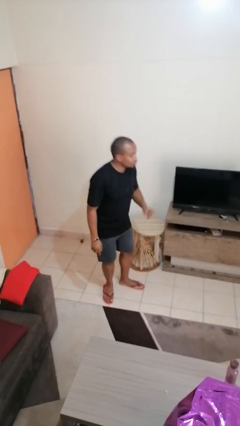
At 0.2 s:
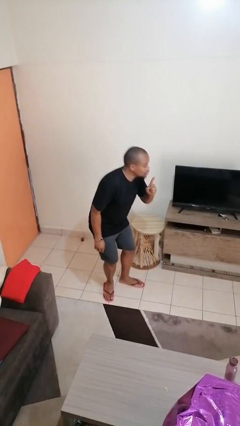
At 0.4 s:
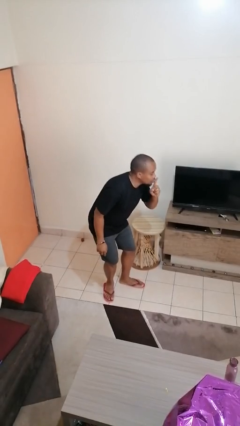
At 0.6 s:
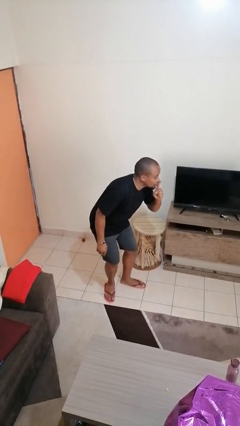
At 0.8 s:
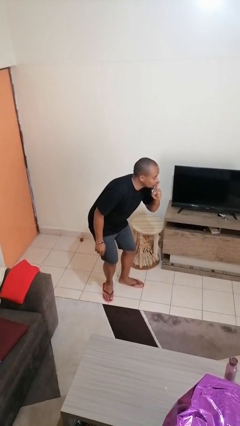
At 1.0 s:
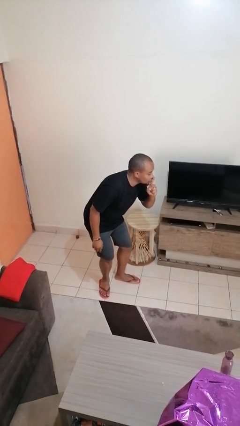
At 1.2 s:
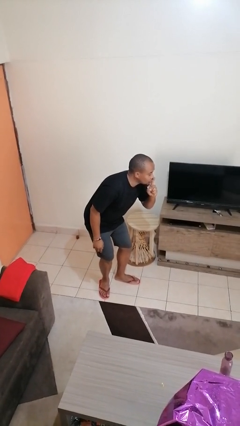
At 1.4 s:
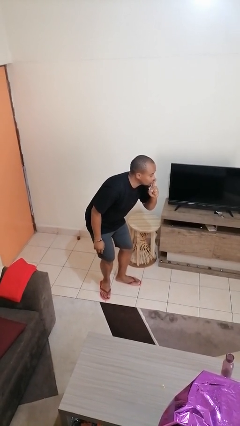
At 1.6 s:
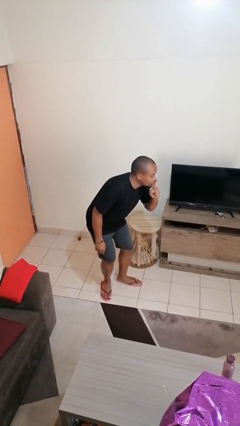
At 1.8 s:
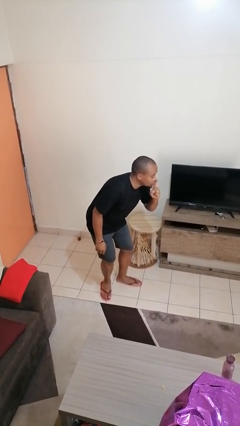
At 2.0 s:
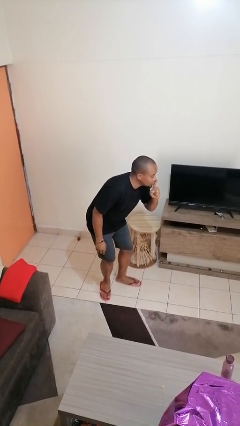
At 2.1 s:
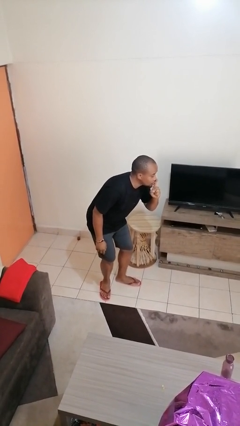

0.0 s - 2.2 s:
person gestures be quiet

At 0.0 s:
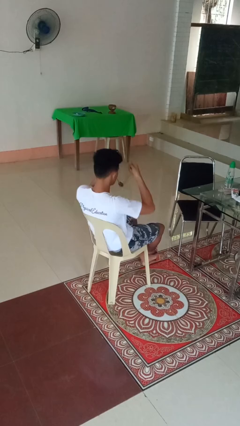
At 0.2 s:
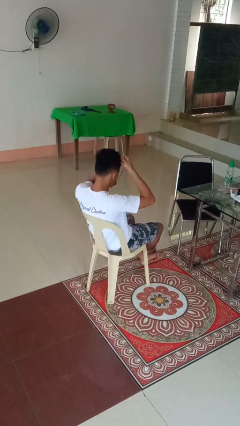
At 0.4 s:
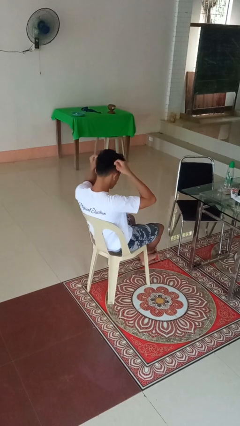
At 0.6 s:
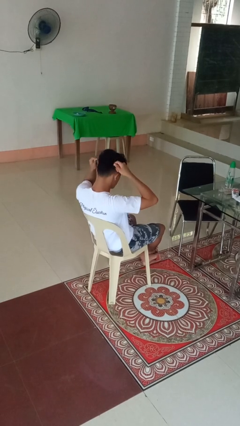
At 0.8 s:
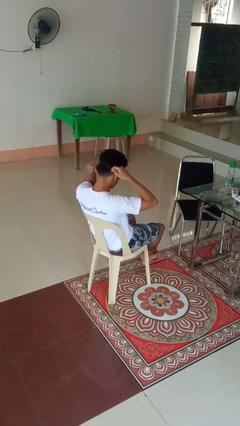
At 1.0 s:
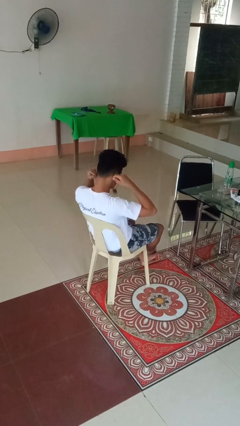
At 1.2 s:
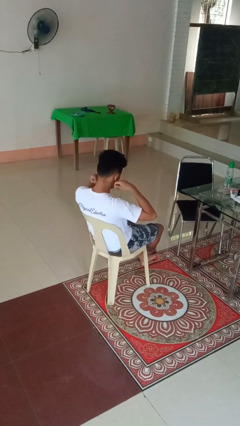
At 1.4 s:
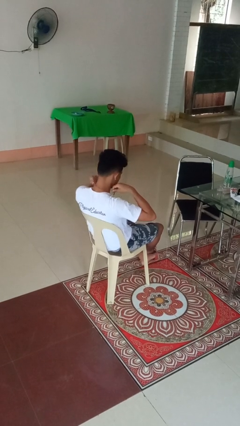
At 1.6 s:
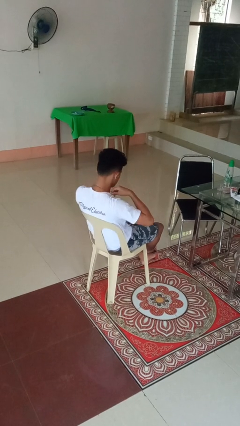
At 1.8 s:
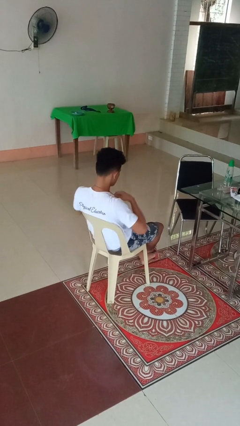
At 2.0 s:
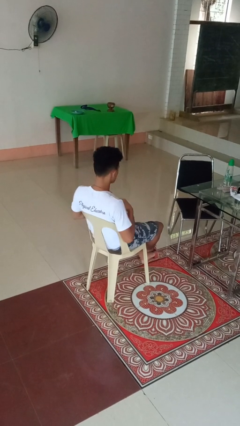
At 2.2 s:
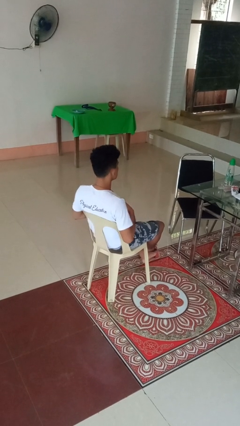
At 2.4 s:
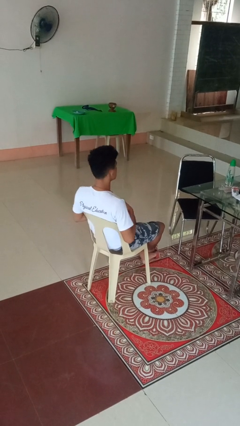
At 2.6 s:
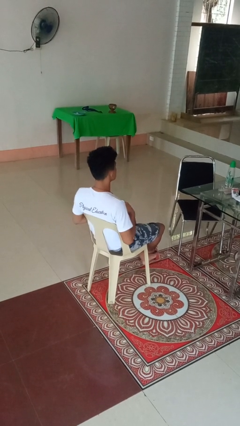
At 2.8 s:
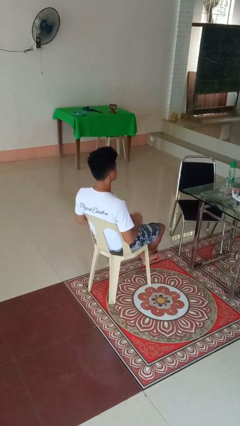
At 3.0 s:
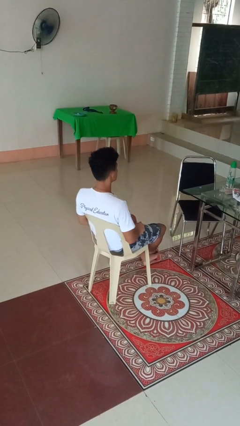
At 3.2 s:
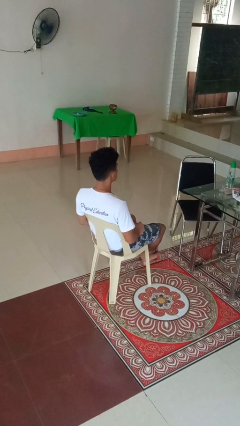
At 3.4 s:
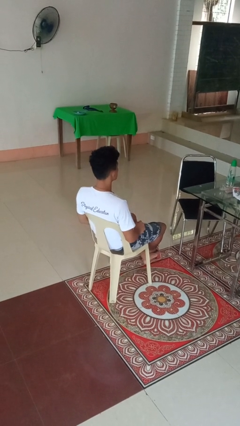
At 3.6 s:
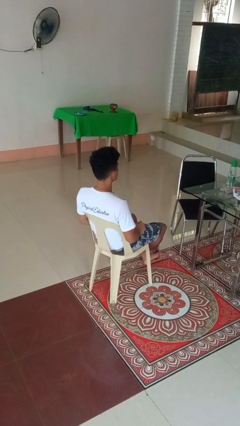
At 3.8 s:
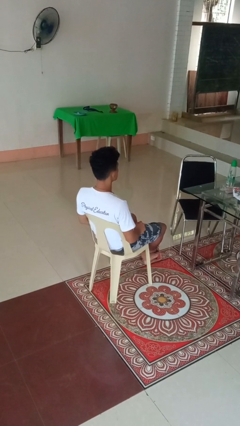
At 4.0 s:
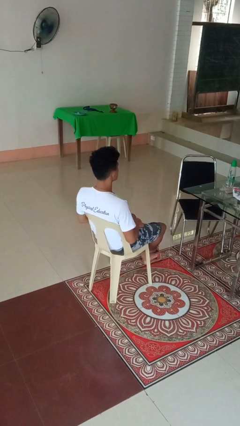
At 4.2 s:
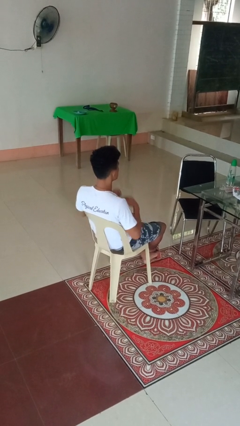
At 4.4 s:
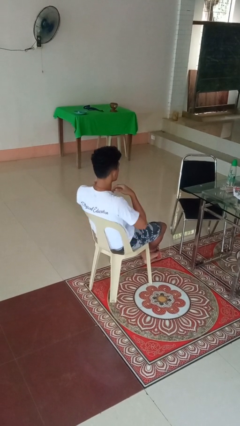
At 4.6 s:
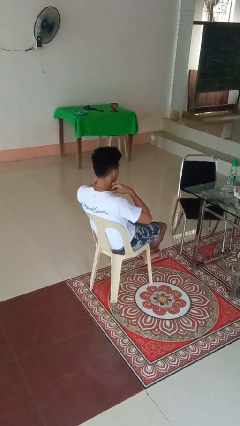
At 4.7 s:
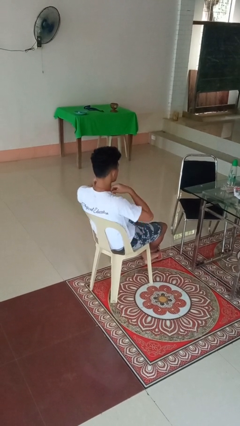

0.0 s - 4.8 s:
person puts on necklace

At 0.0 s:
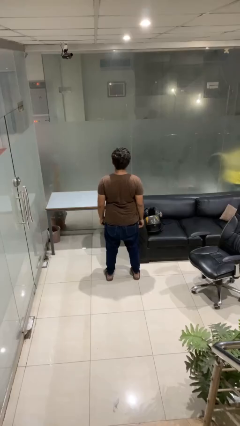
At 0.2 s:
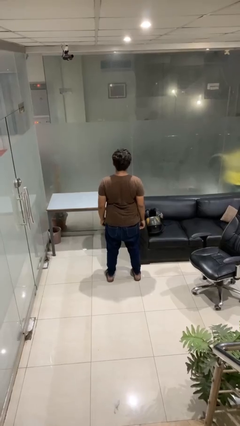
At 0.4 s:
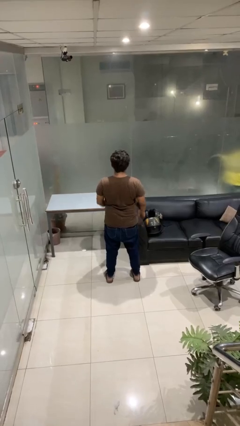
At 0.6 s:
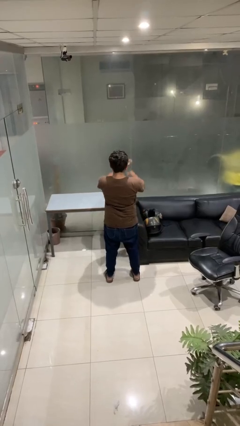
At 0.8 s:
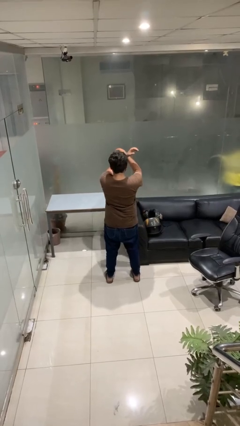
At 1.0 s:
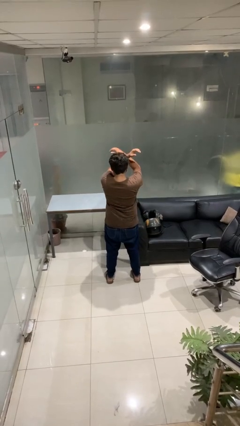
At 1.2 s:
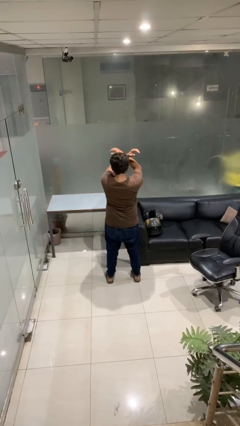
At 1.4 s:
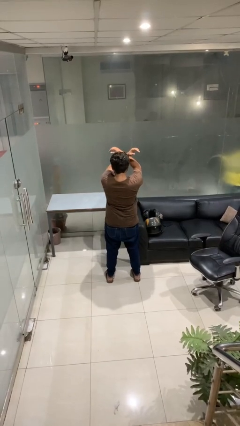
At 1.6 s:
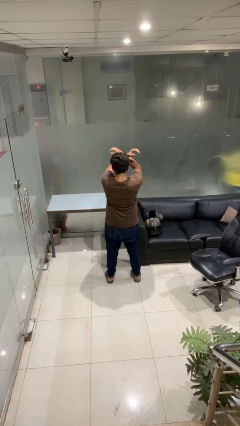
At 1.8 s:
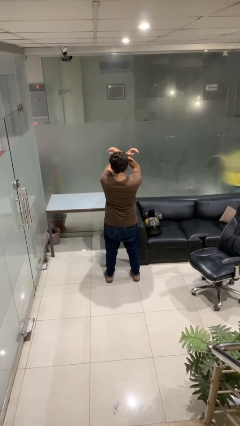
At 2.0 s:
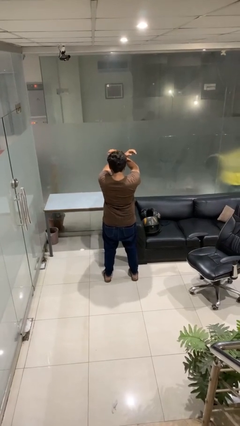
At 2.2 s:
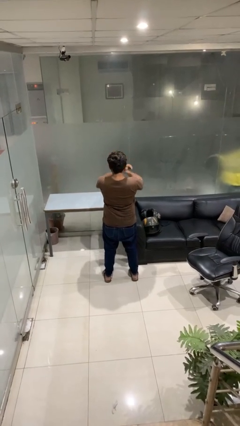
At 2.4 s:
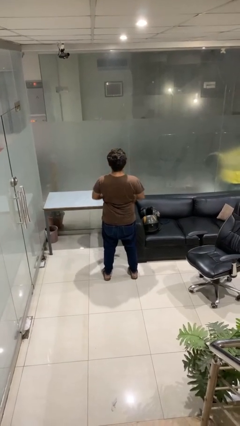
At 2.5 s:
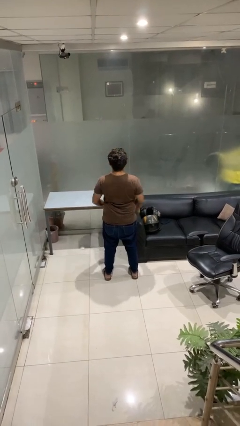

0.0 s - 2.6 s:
person gestures arms x

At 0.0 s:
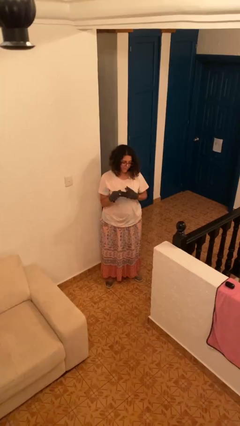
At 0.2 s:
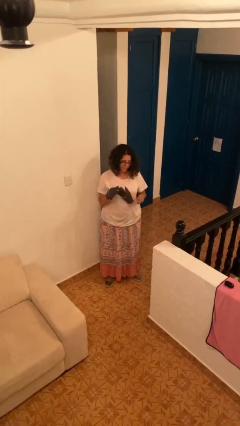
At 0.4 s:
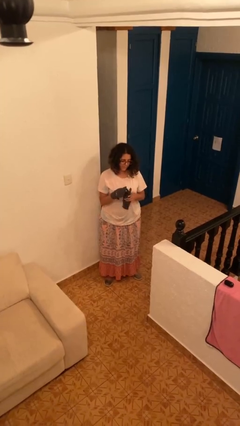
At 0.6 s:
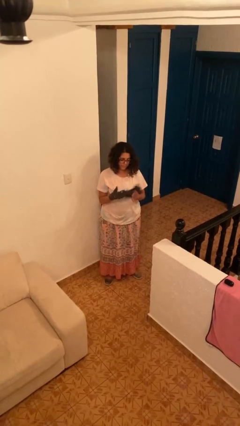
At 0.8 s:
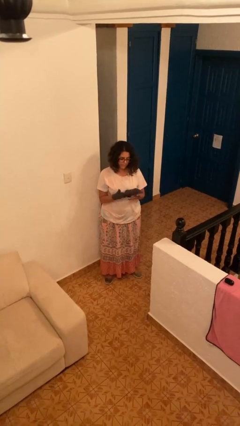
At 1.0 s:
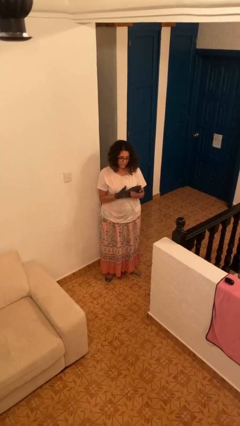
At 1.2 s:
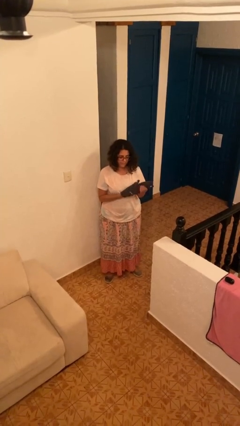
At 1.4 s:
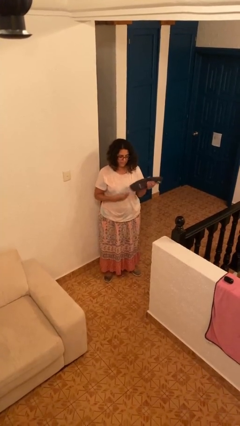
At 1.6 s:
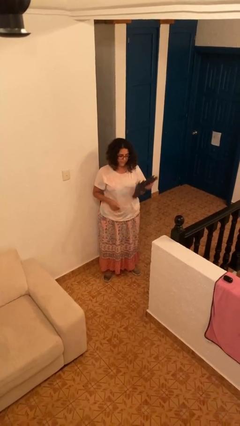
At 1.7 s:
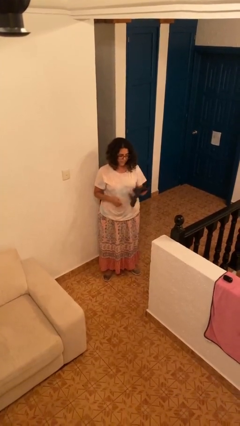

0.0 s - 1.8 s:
person takes off gloves

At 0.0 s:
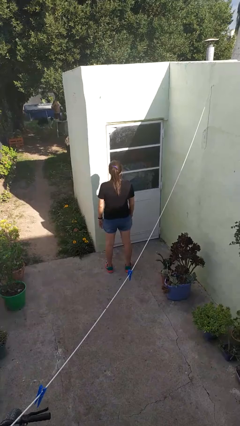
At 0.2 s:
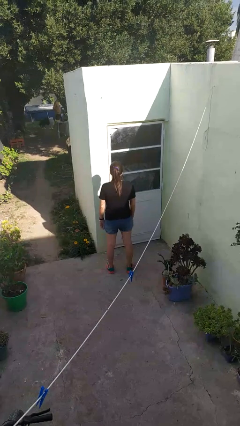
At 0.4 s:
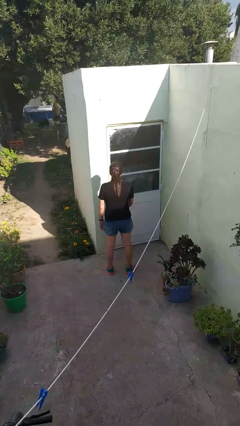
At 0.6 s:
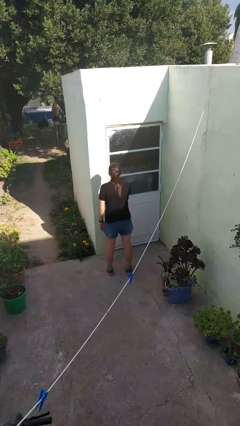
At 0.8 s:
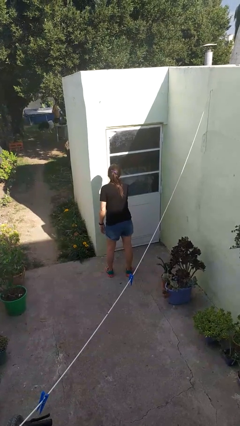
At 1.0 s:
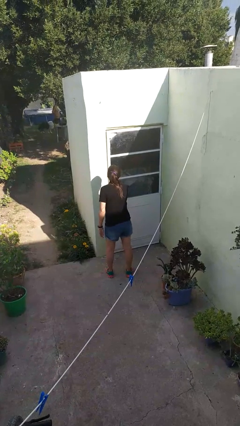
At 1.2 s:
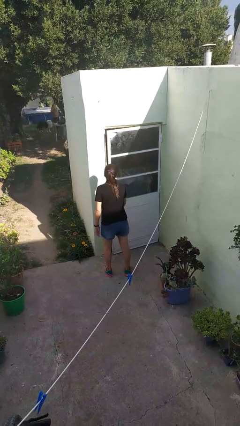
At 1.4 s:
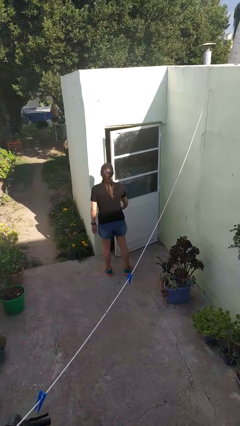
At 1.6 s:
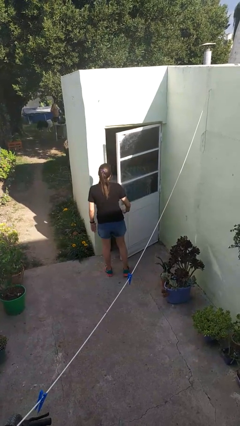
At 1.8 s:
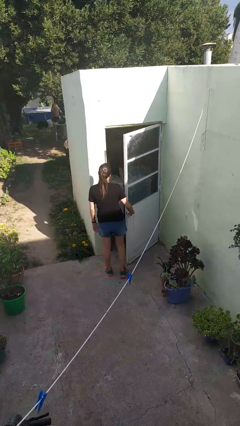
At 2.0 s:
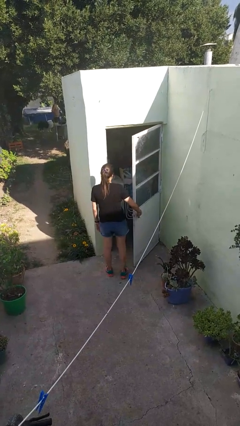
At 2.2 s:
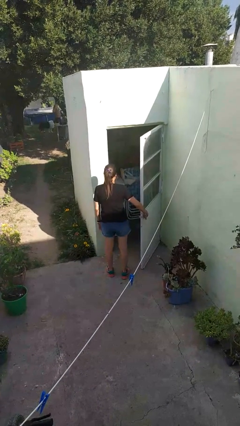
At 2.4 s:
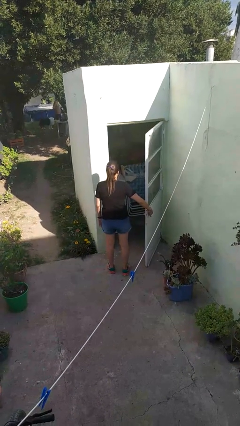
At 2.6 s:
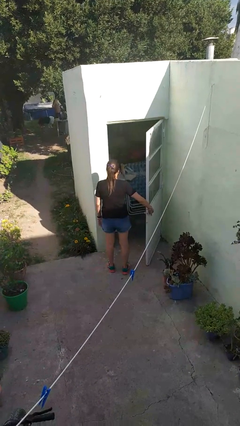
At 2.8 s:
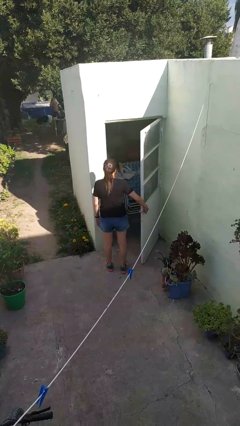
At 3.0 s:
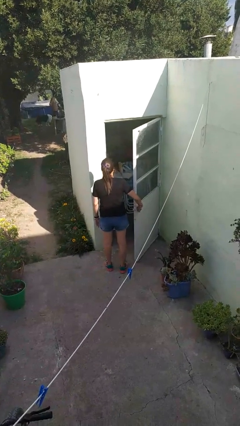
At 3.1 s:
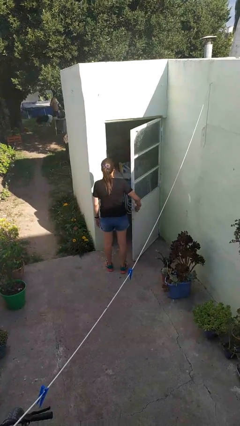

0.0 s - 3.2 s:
person opens facility door

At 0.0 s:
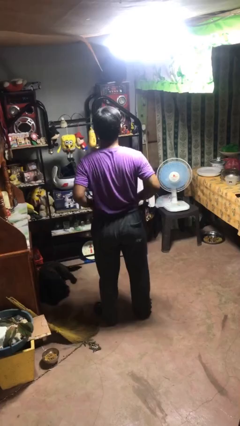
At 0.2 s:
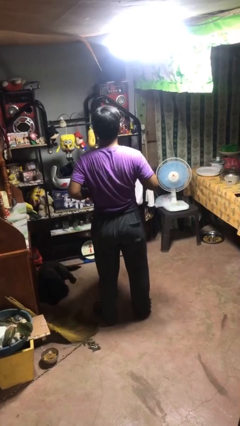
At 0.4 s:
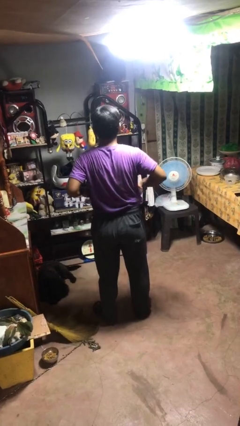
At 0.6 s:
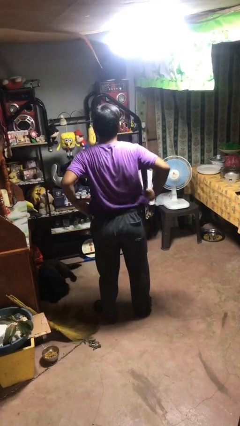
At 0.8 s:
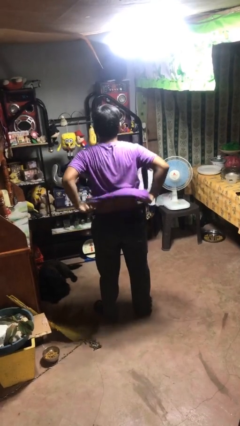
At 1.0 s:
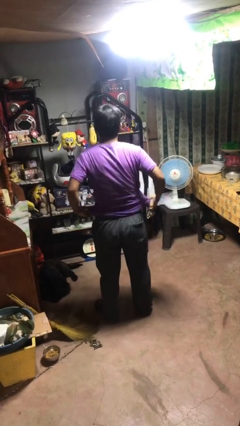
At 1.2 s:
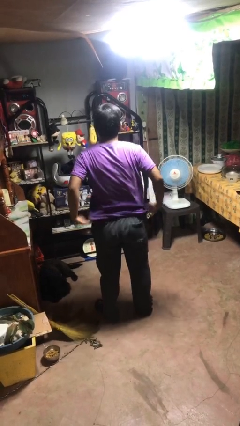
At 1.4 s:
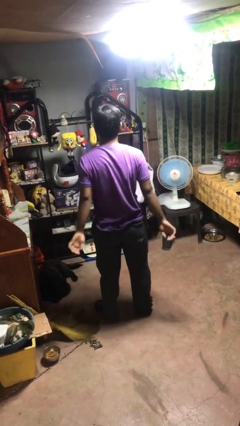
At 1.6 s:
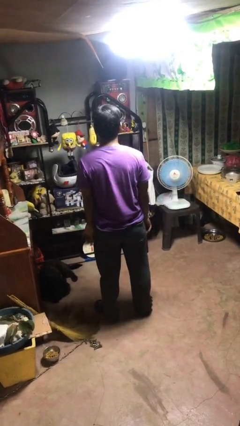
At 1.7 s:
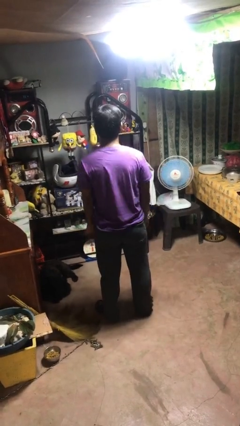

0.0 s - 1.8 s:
person untucks shirt

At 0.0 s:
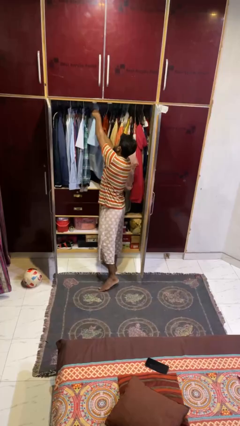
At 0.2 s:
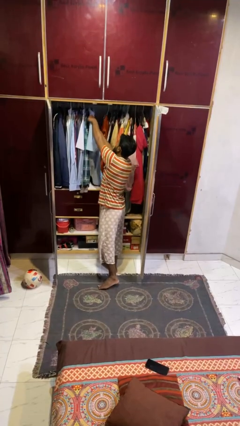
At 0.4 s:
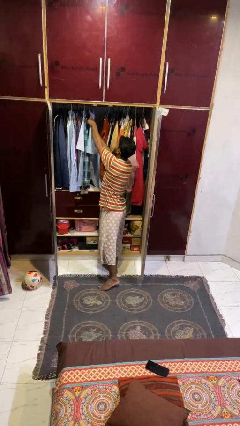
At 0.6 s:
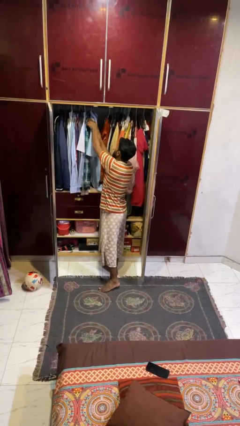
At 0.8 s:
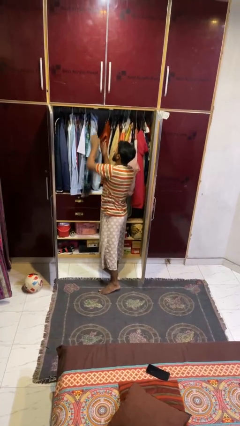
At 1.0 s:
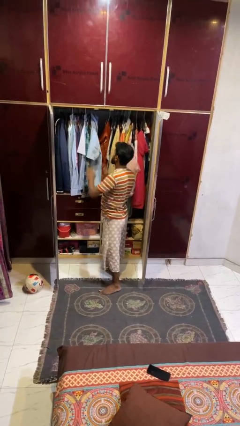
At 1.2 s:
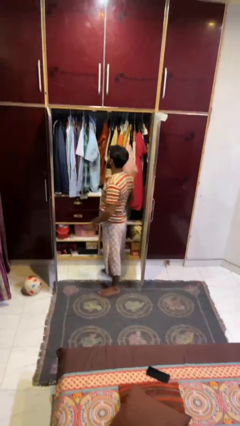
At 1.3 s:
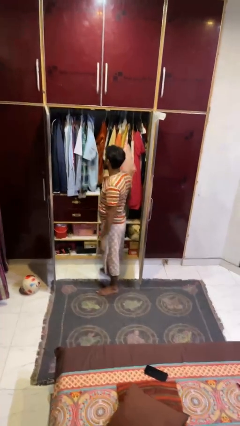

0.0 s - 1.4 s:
person takes clothes from closet
